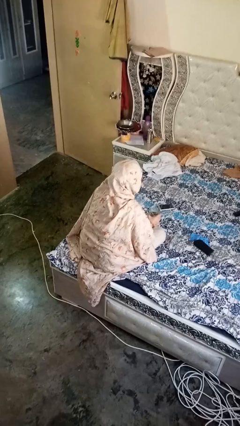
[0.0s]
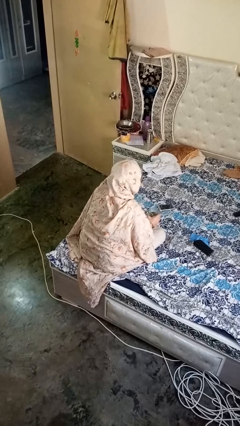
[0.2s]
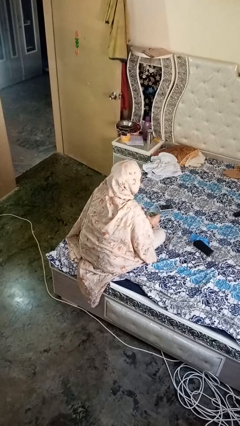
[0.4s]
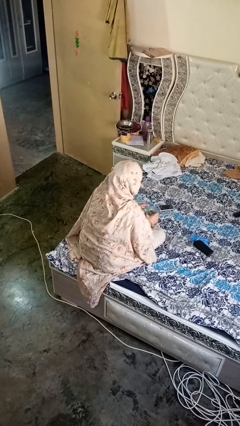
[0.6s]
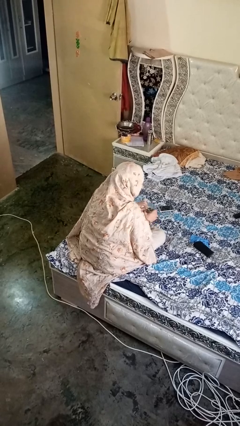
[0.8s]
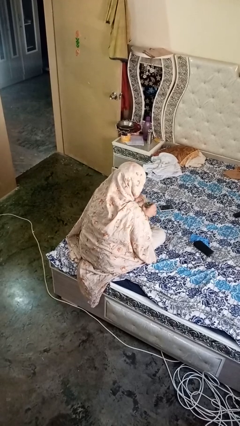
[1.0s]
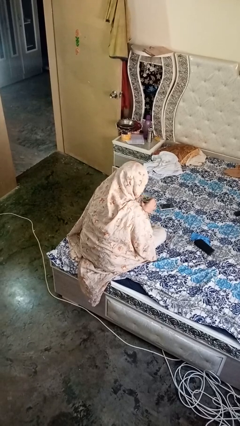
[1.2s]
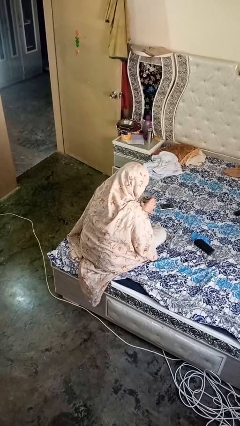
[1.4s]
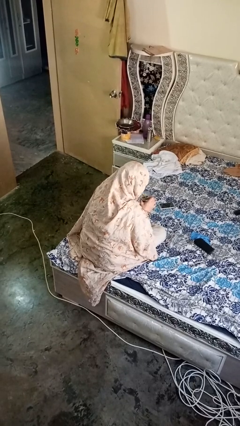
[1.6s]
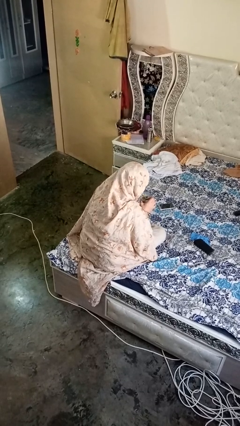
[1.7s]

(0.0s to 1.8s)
person drinks from straw

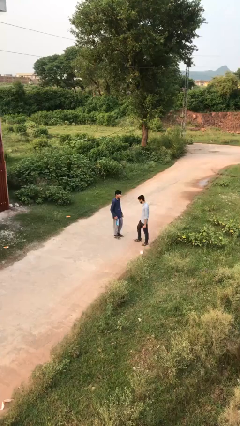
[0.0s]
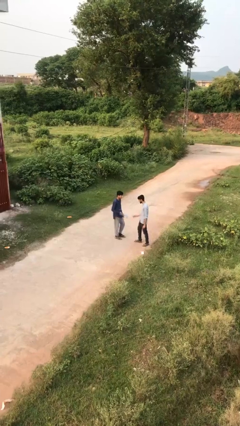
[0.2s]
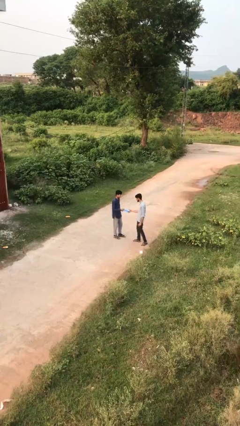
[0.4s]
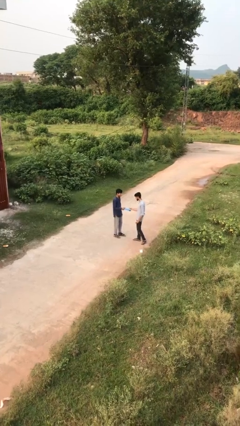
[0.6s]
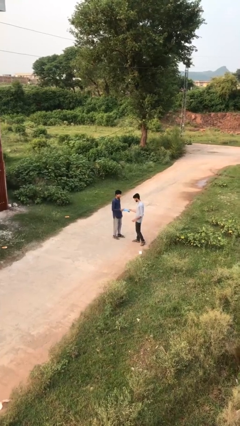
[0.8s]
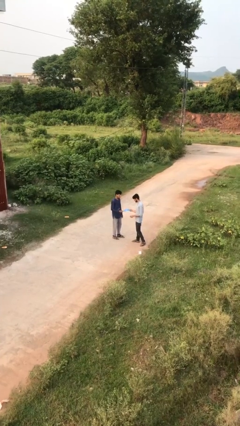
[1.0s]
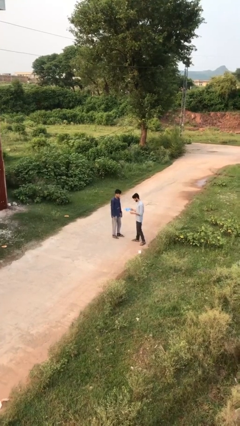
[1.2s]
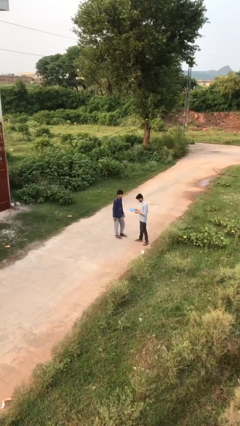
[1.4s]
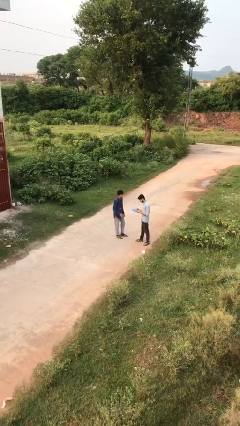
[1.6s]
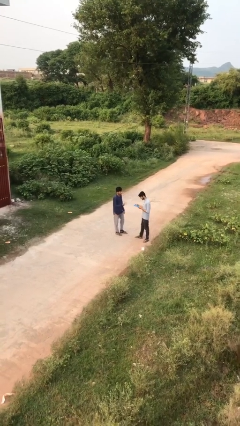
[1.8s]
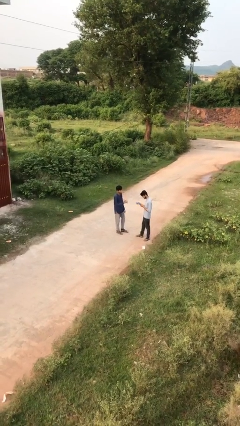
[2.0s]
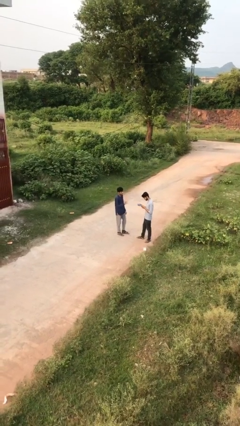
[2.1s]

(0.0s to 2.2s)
person transfers object to person

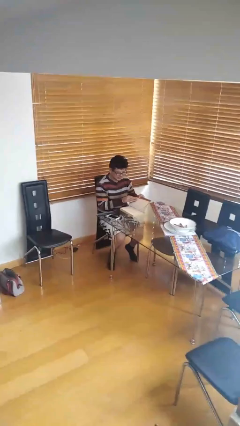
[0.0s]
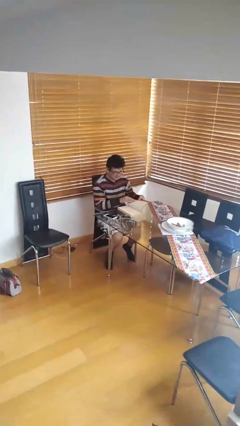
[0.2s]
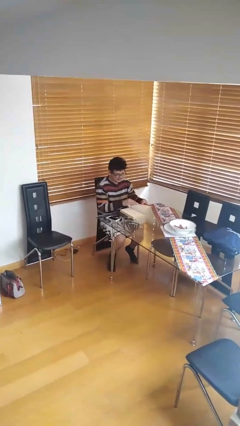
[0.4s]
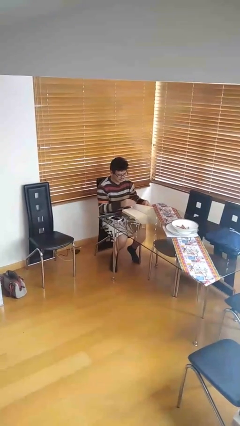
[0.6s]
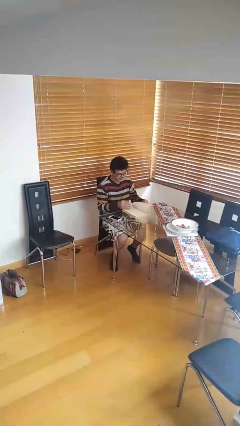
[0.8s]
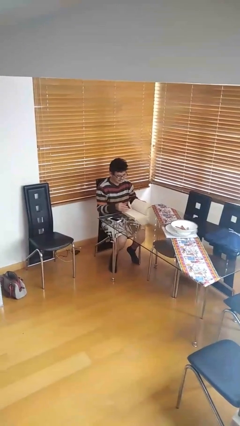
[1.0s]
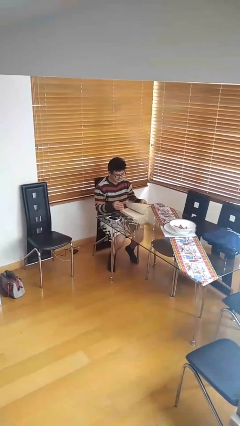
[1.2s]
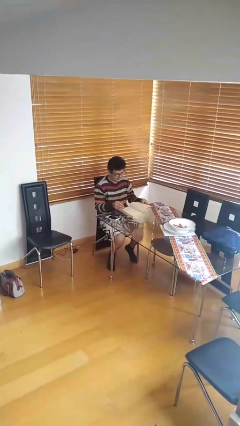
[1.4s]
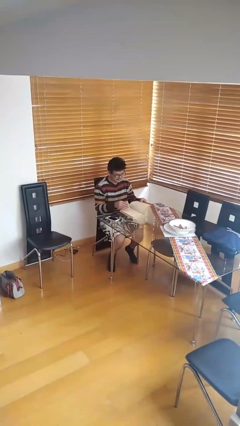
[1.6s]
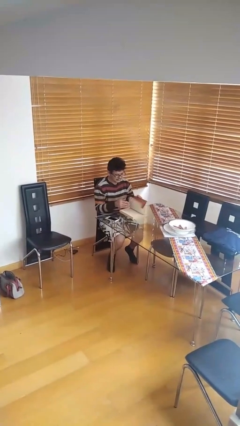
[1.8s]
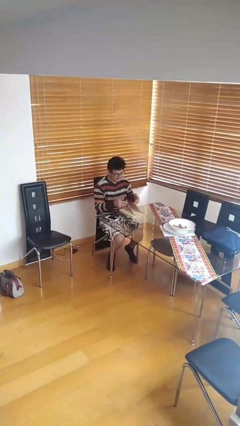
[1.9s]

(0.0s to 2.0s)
person reads document

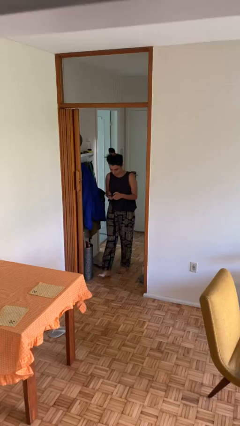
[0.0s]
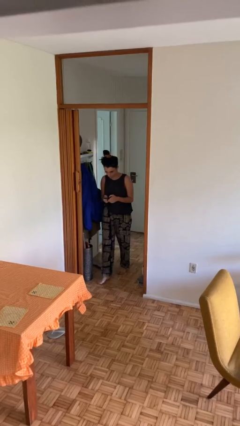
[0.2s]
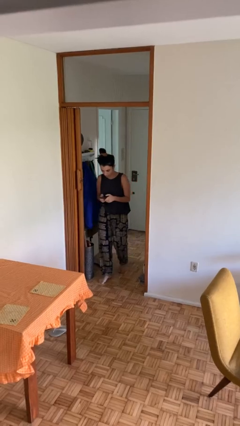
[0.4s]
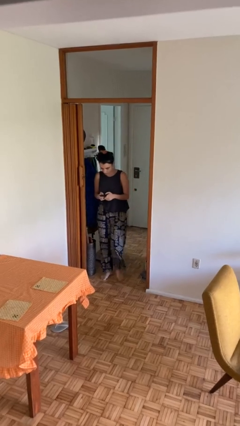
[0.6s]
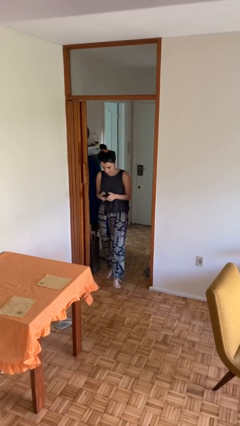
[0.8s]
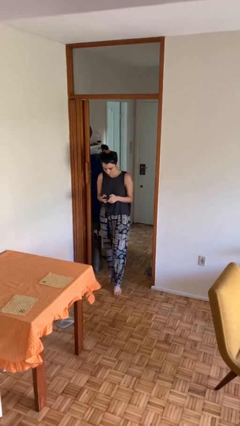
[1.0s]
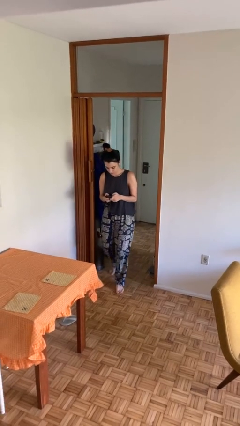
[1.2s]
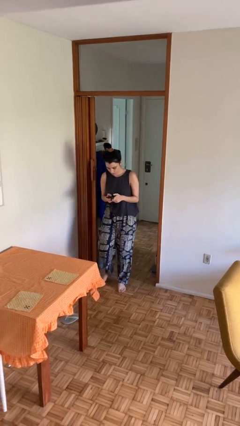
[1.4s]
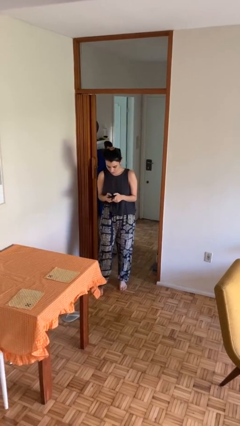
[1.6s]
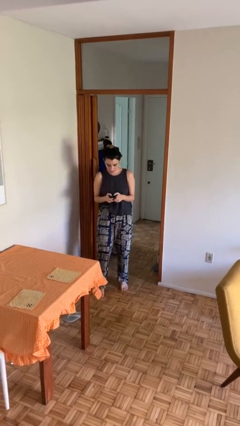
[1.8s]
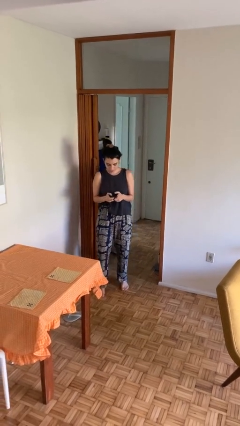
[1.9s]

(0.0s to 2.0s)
person enters scene through structure

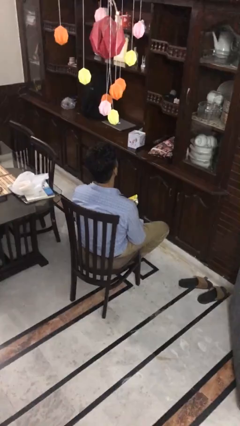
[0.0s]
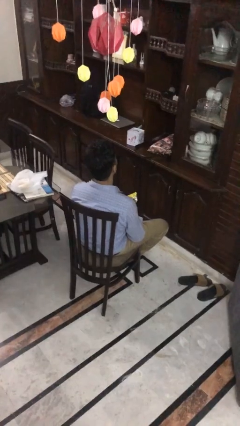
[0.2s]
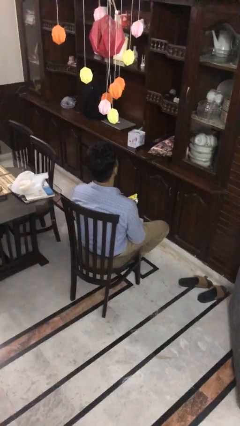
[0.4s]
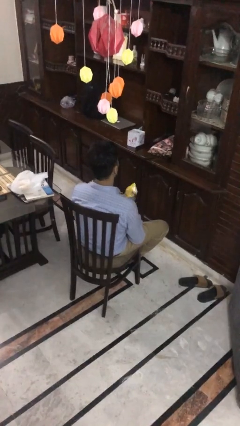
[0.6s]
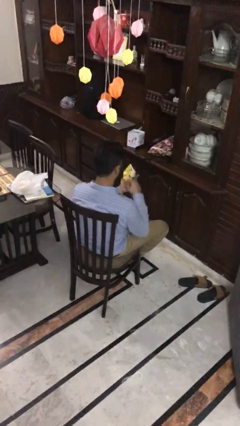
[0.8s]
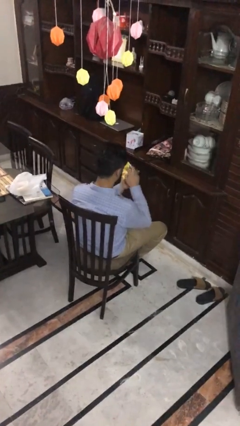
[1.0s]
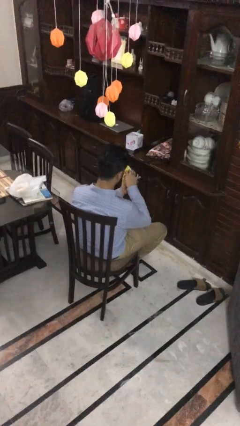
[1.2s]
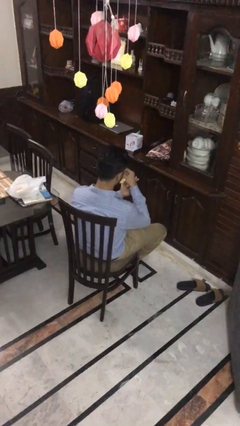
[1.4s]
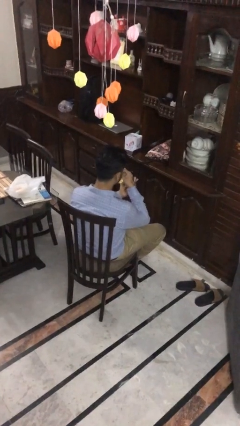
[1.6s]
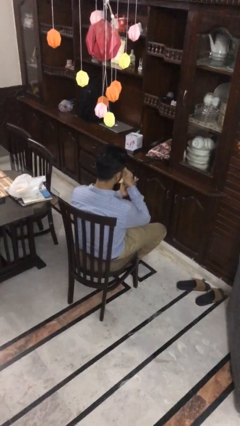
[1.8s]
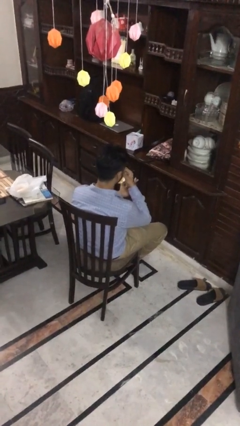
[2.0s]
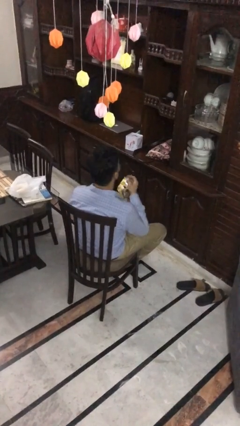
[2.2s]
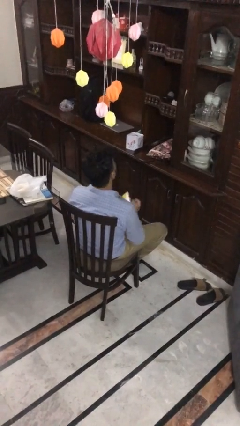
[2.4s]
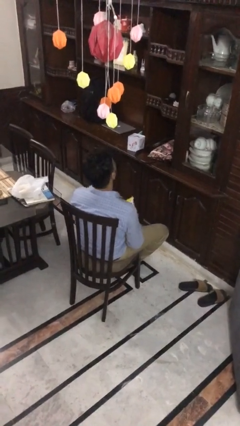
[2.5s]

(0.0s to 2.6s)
person eats snack from bag

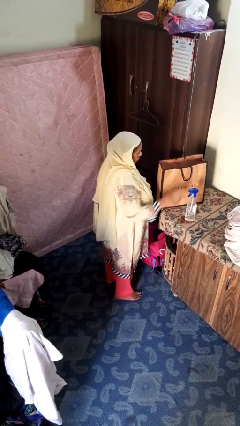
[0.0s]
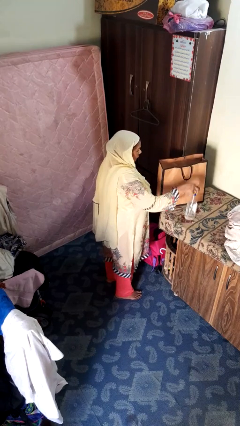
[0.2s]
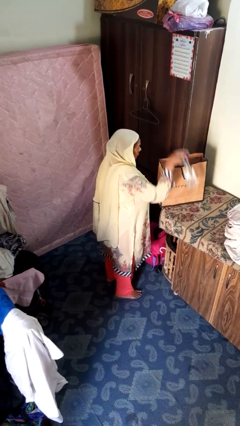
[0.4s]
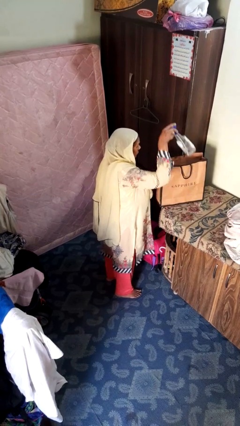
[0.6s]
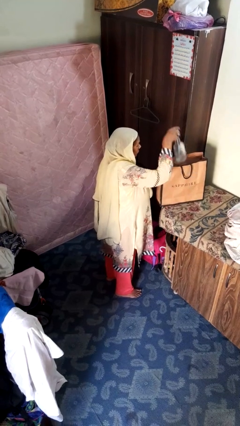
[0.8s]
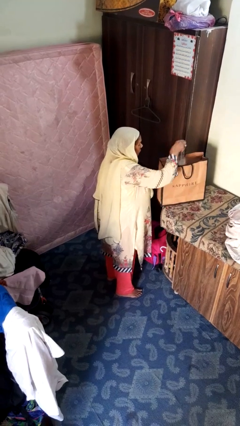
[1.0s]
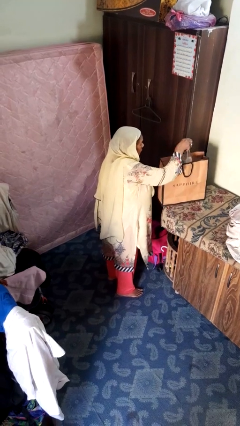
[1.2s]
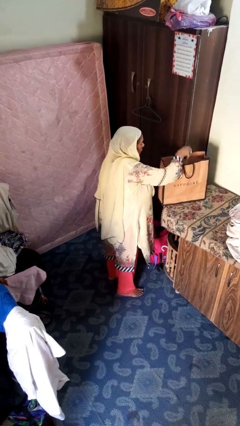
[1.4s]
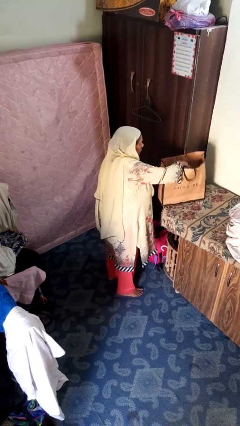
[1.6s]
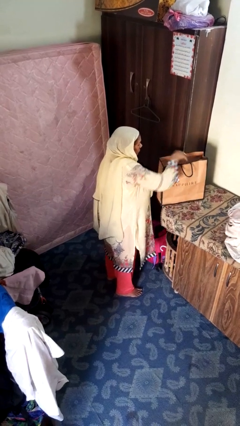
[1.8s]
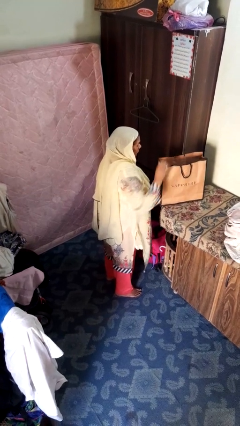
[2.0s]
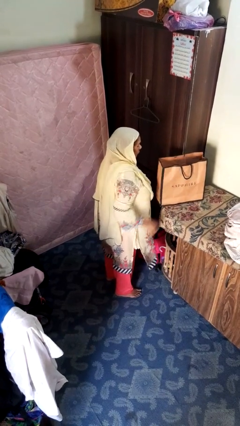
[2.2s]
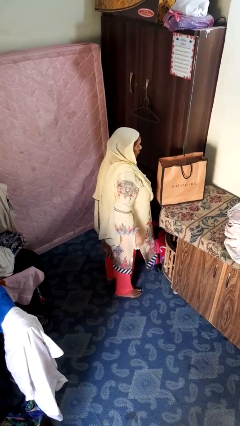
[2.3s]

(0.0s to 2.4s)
person puts object into bag

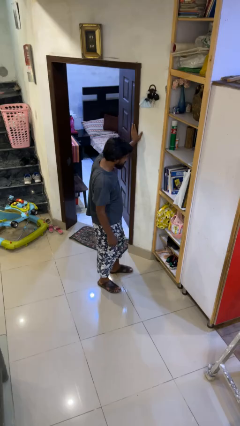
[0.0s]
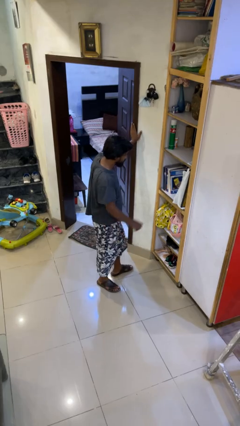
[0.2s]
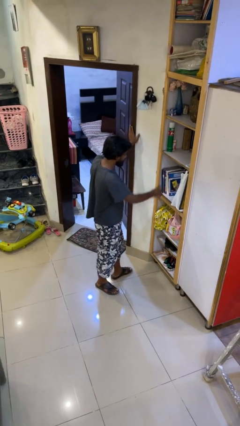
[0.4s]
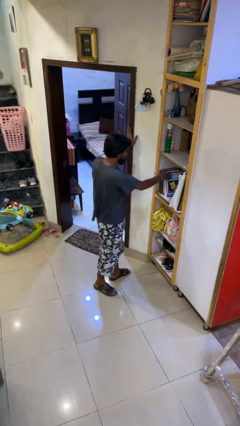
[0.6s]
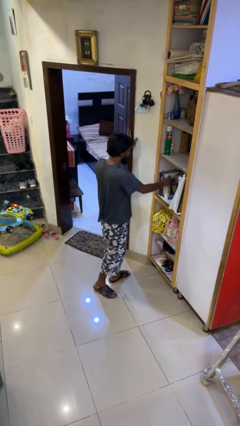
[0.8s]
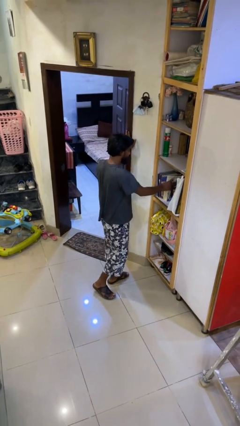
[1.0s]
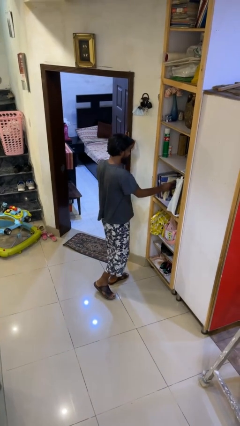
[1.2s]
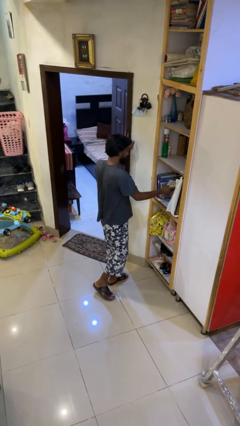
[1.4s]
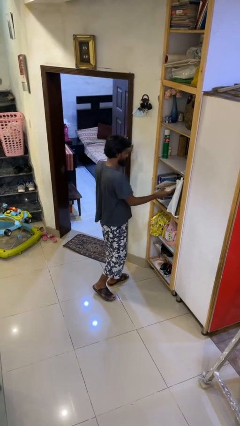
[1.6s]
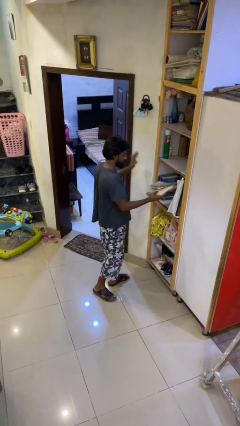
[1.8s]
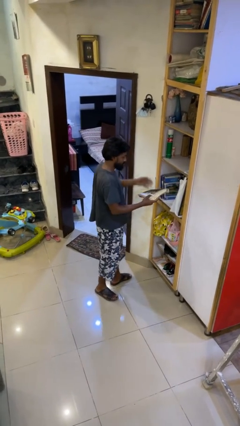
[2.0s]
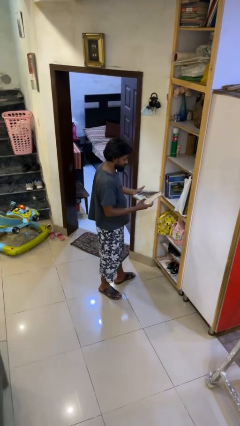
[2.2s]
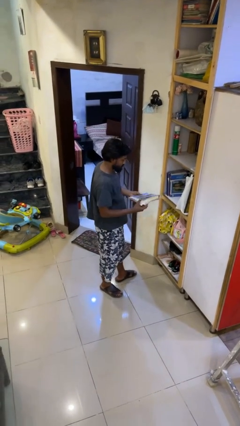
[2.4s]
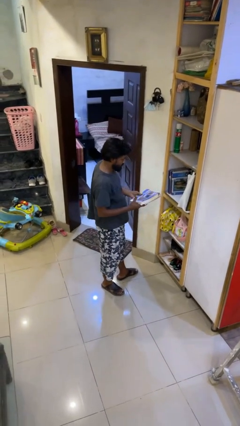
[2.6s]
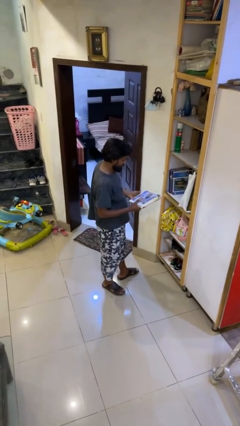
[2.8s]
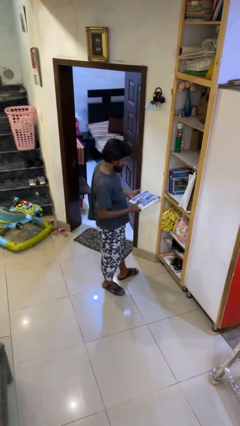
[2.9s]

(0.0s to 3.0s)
person picks up object from cabinet

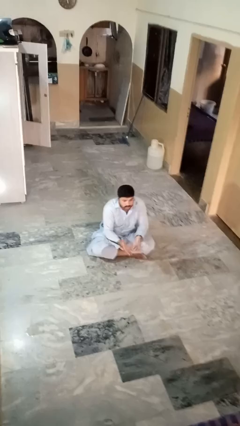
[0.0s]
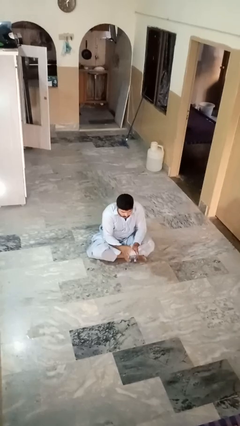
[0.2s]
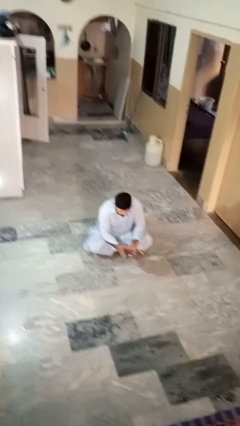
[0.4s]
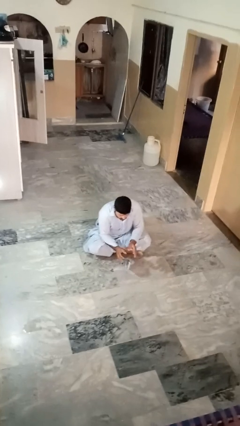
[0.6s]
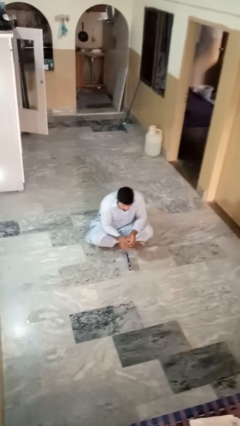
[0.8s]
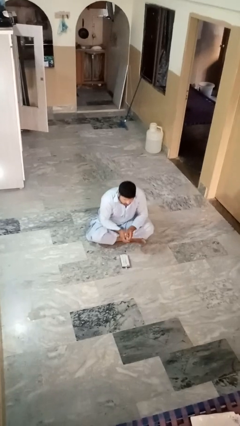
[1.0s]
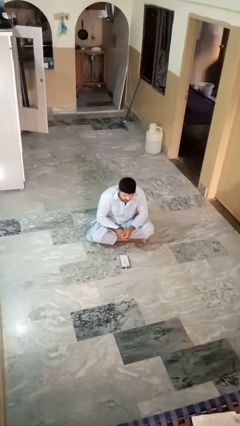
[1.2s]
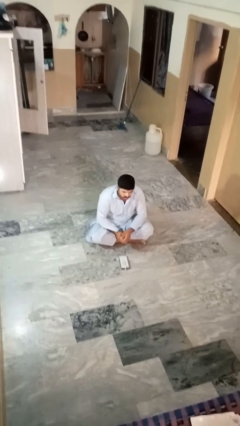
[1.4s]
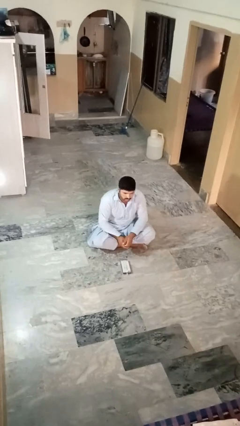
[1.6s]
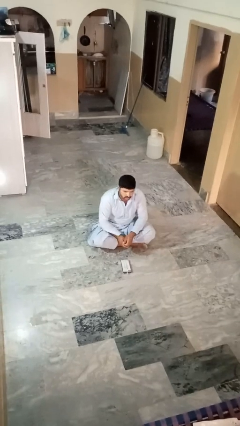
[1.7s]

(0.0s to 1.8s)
person catches dropped object
